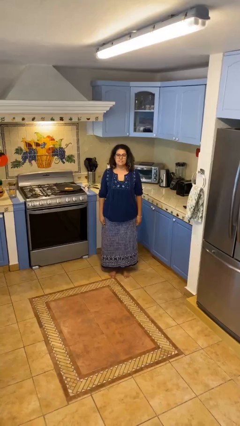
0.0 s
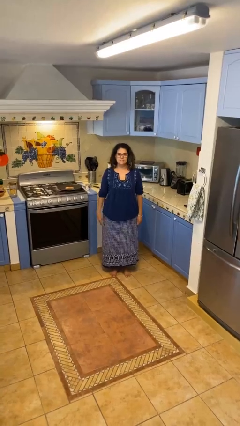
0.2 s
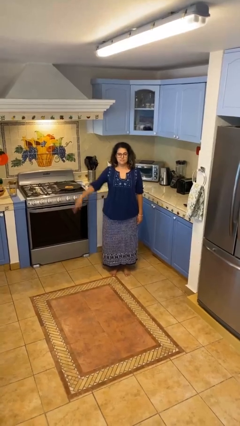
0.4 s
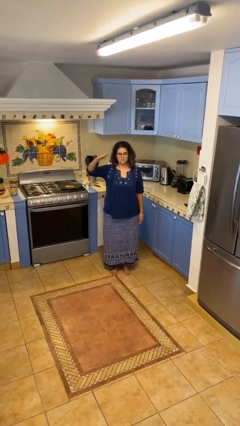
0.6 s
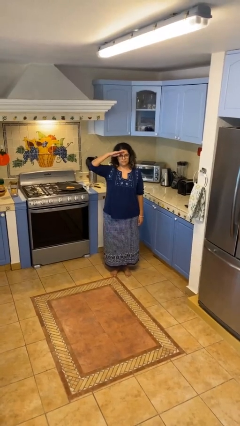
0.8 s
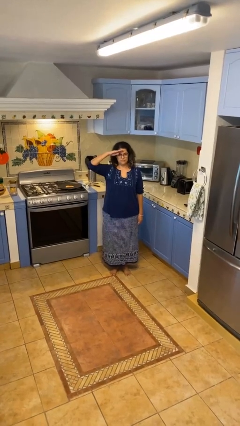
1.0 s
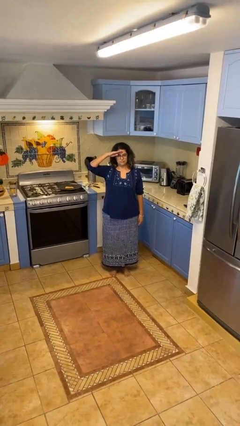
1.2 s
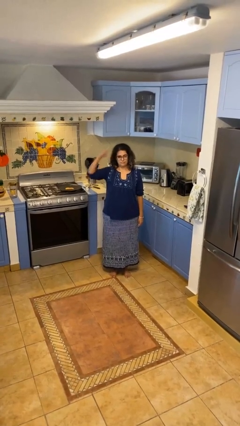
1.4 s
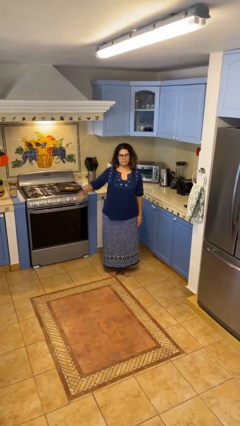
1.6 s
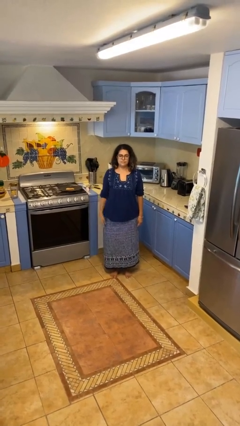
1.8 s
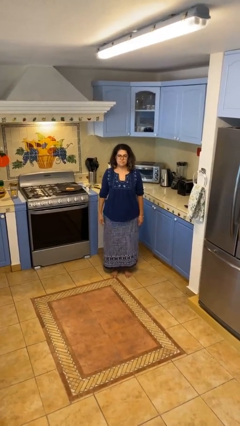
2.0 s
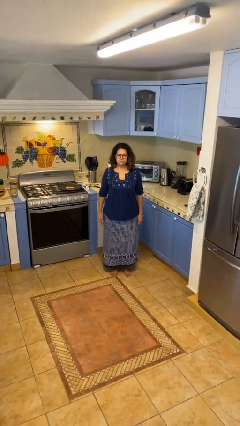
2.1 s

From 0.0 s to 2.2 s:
person salutes

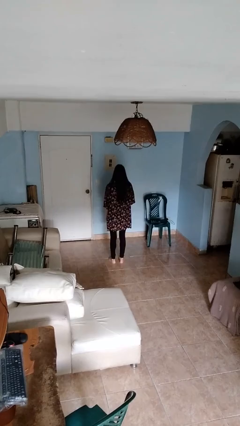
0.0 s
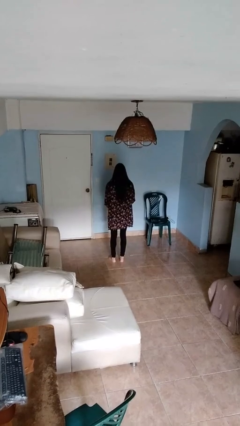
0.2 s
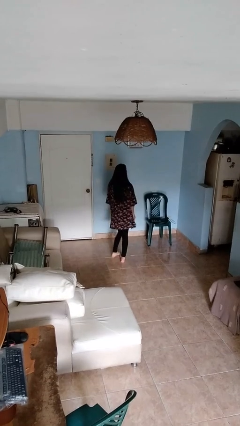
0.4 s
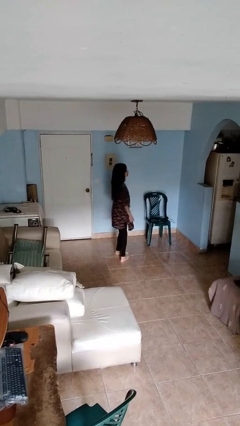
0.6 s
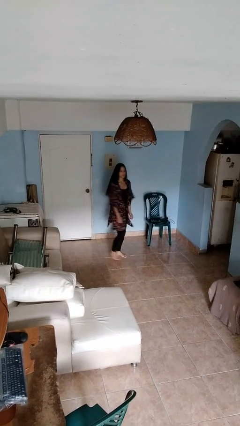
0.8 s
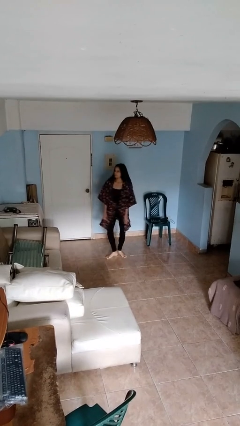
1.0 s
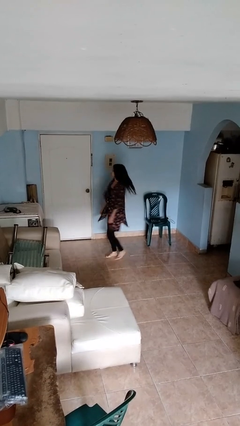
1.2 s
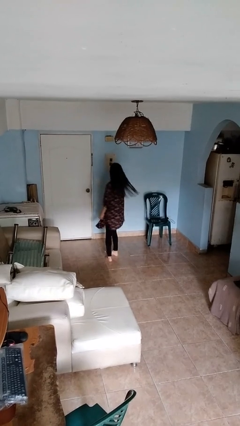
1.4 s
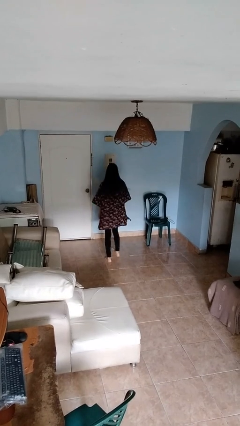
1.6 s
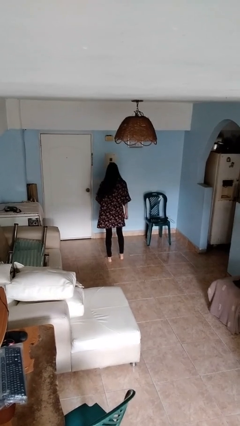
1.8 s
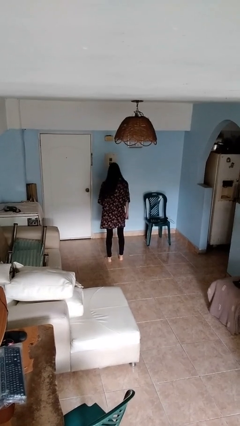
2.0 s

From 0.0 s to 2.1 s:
person twirls

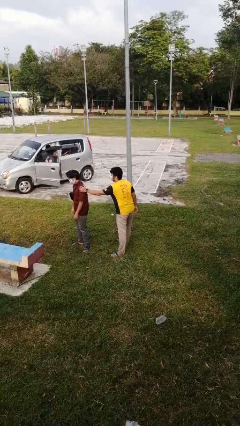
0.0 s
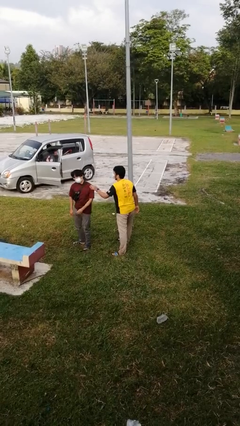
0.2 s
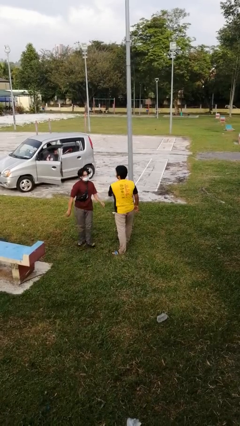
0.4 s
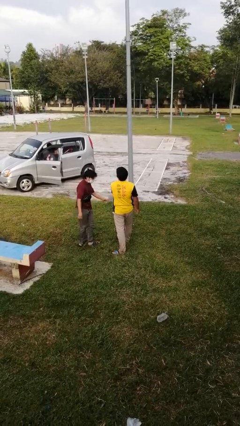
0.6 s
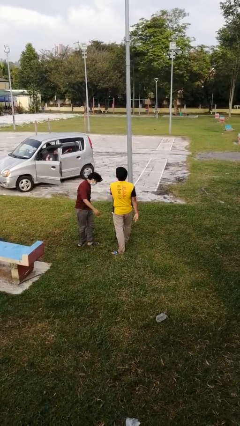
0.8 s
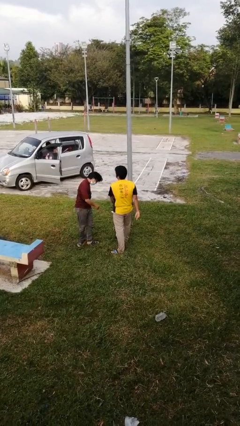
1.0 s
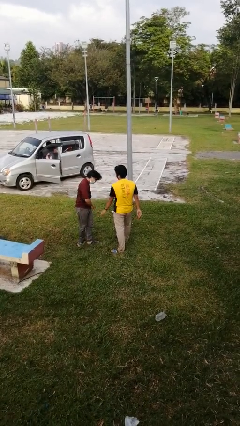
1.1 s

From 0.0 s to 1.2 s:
person spins person around

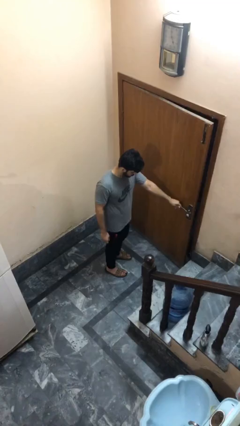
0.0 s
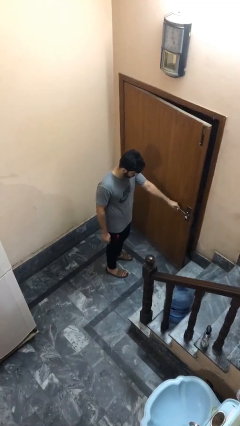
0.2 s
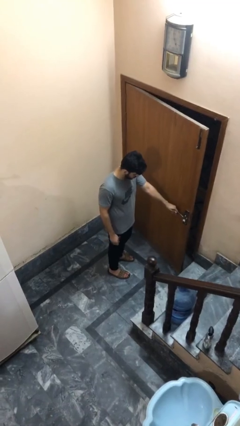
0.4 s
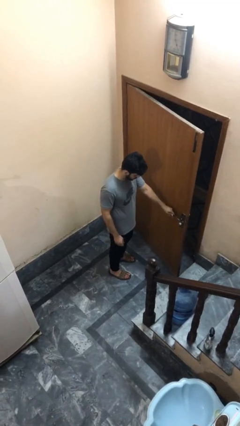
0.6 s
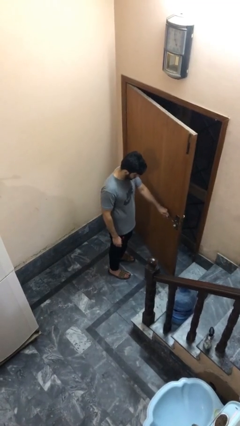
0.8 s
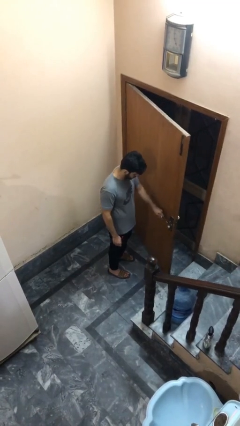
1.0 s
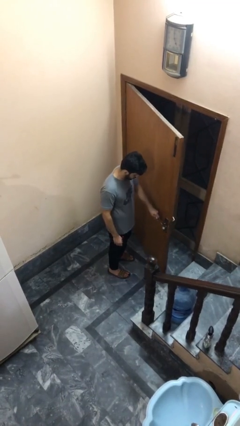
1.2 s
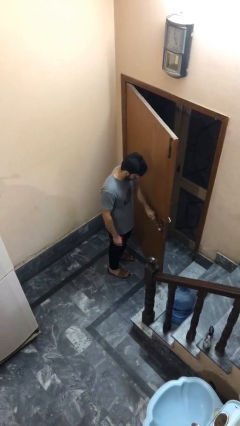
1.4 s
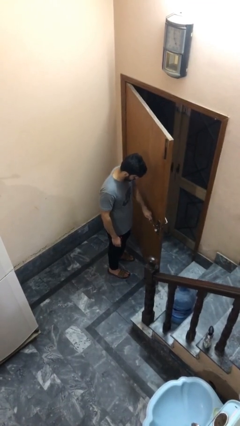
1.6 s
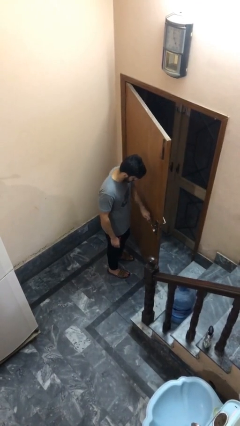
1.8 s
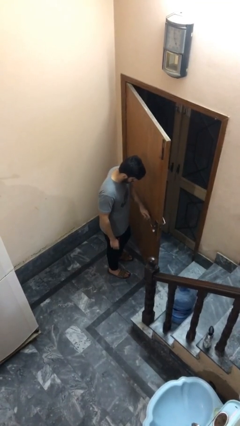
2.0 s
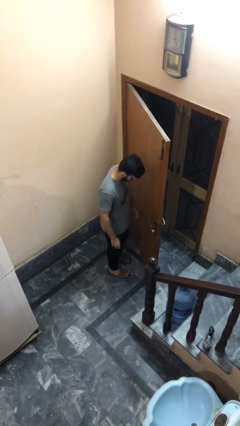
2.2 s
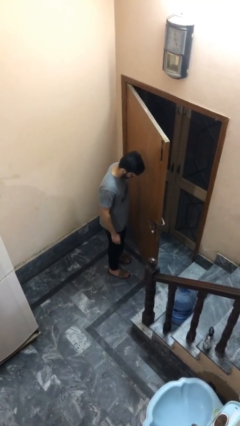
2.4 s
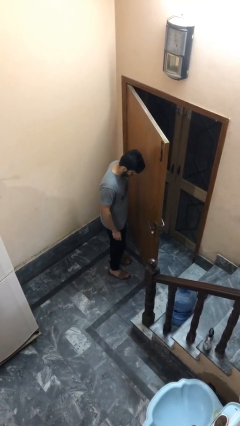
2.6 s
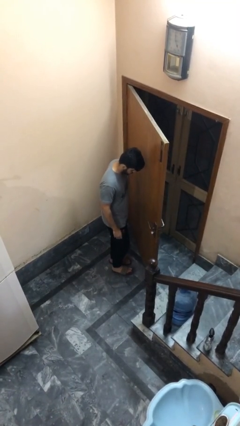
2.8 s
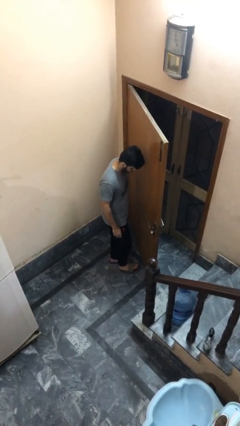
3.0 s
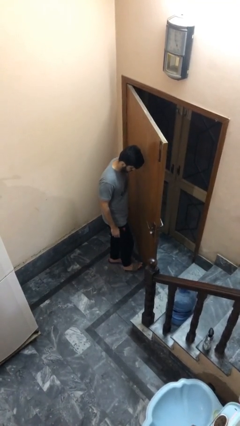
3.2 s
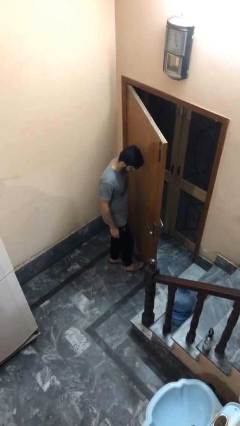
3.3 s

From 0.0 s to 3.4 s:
person opens facility door

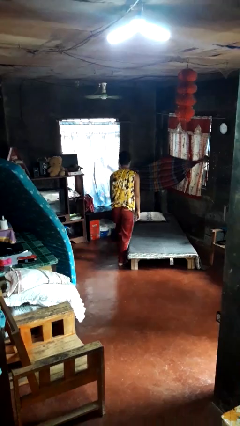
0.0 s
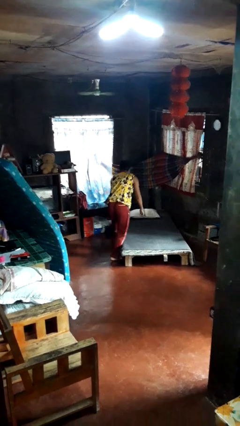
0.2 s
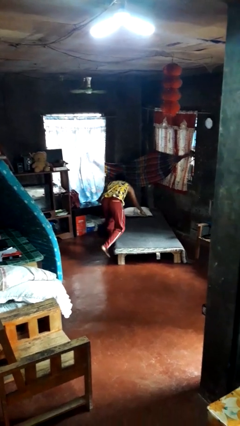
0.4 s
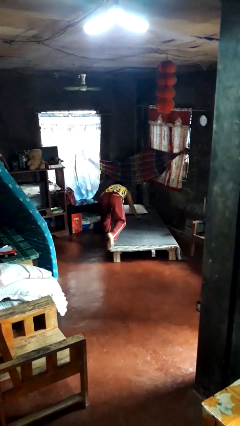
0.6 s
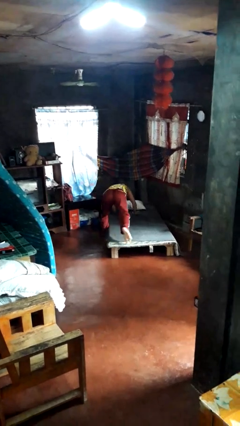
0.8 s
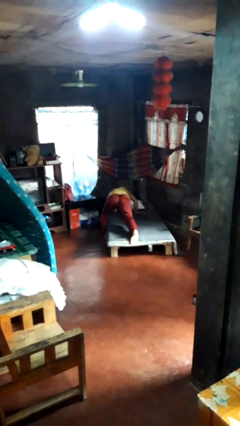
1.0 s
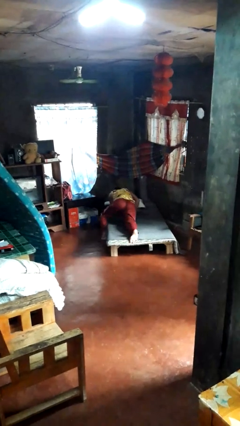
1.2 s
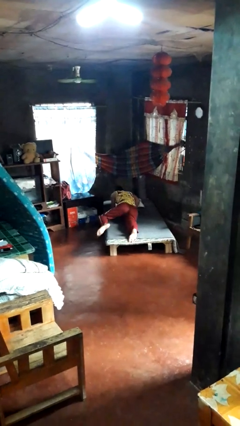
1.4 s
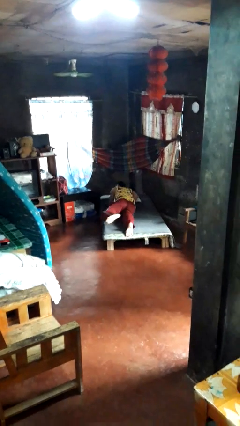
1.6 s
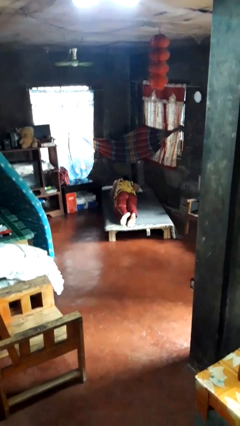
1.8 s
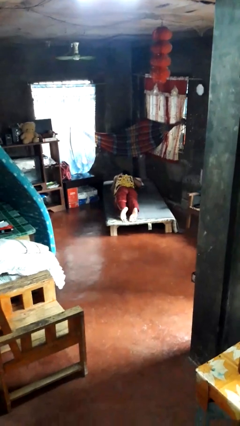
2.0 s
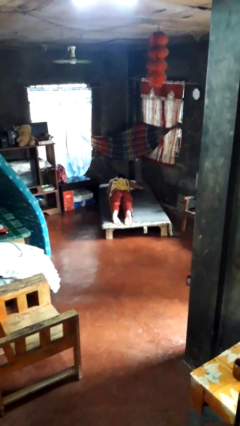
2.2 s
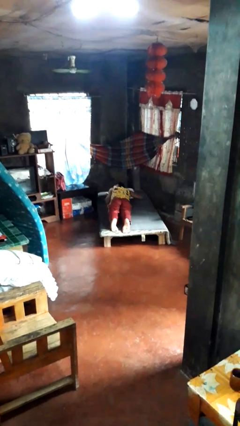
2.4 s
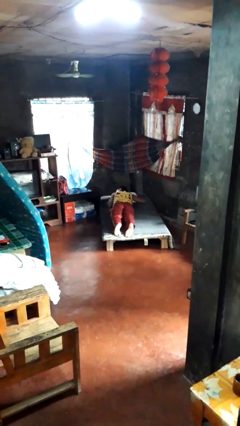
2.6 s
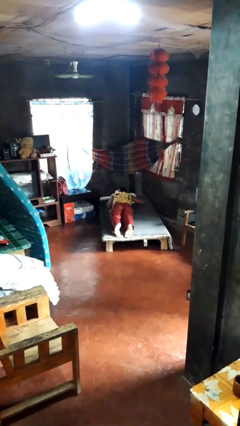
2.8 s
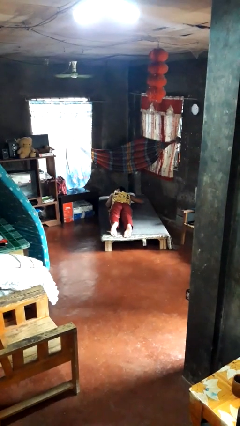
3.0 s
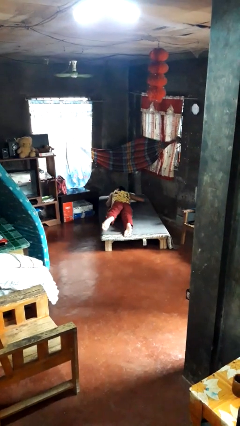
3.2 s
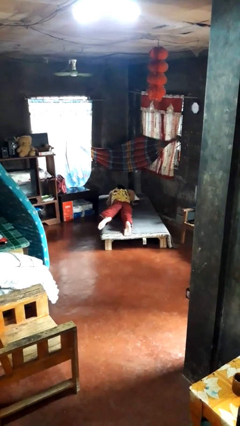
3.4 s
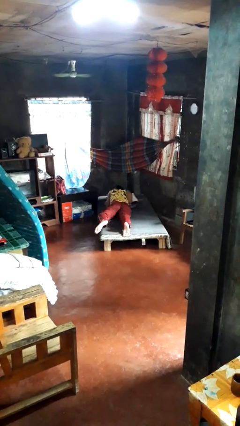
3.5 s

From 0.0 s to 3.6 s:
person lies down on bed

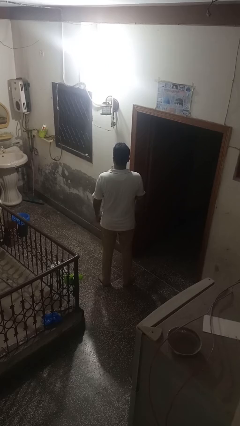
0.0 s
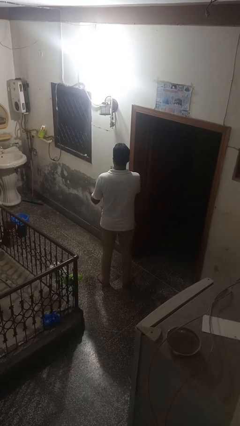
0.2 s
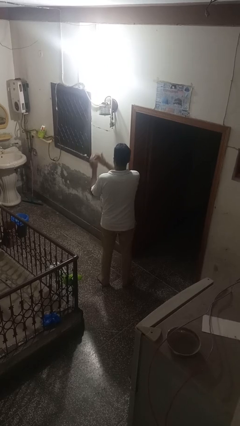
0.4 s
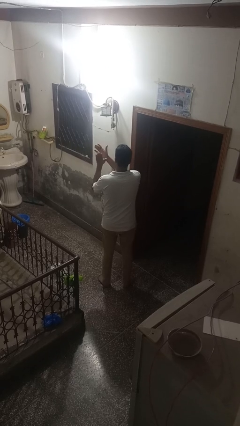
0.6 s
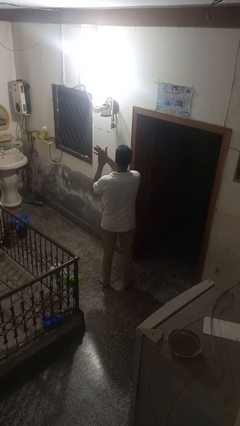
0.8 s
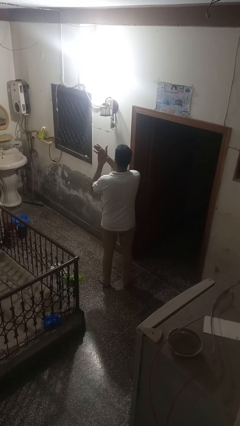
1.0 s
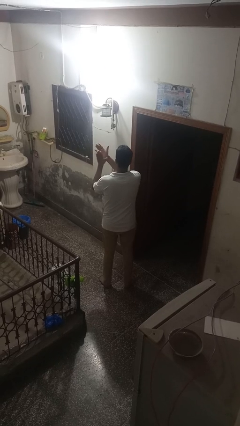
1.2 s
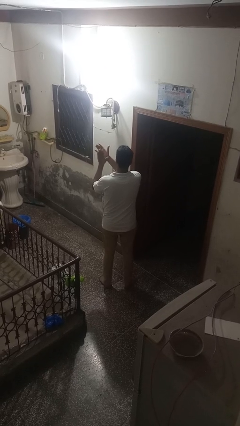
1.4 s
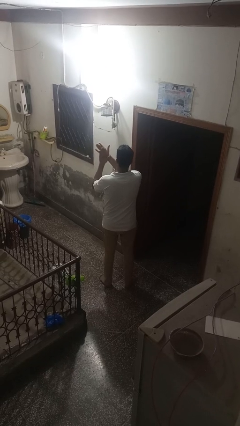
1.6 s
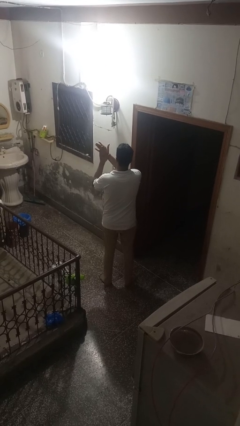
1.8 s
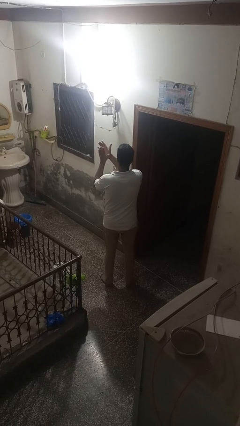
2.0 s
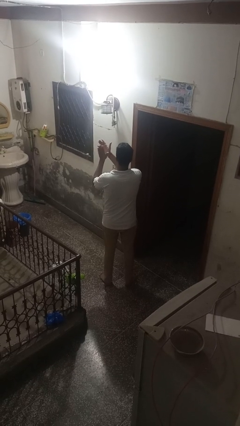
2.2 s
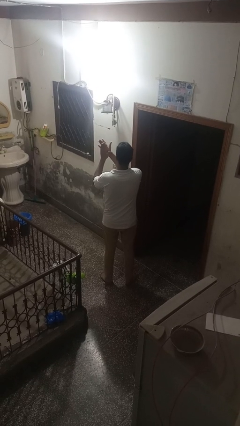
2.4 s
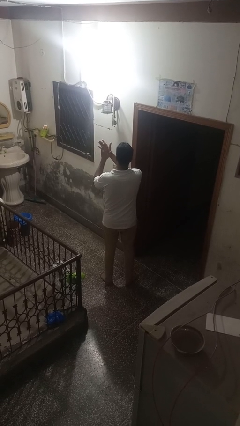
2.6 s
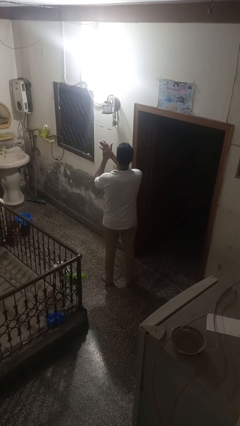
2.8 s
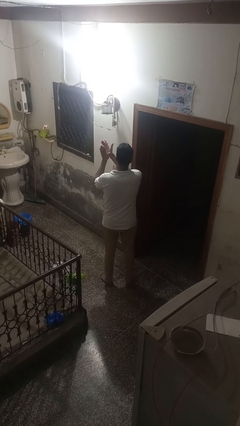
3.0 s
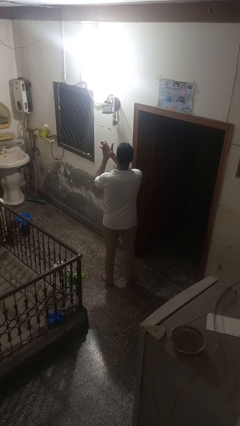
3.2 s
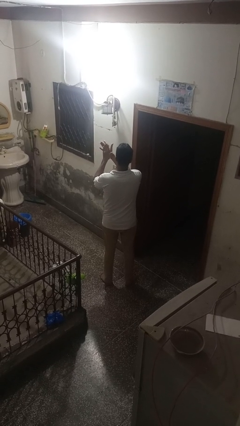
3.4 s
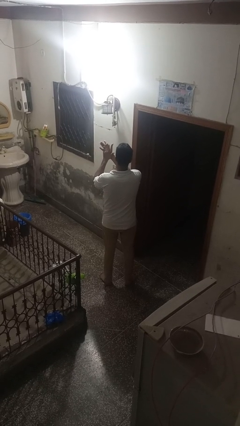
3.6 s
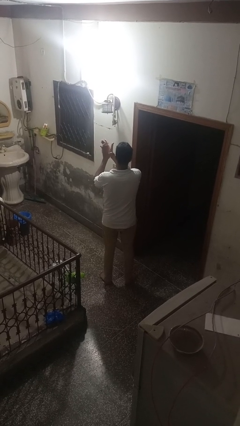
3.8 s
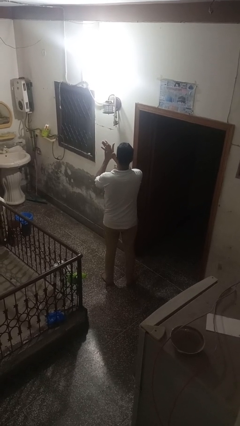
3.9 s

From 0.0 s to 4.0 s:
person claps hands

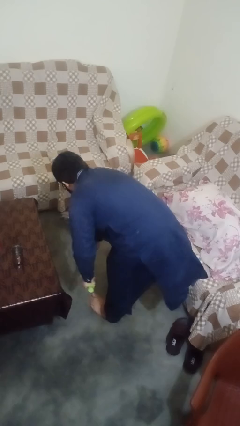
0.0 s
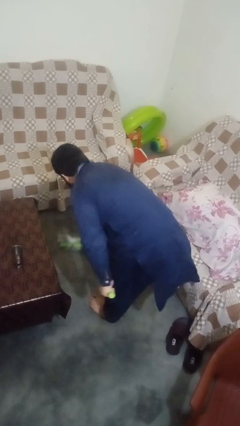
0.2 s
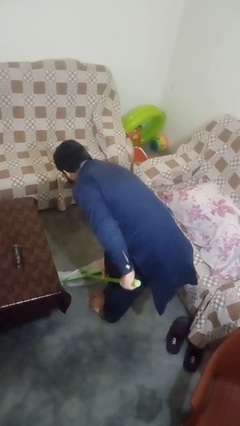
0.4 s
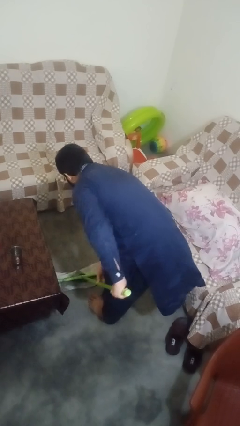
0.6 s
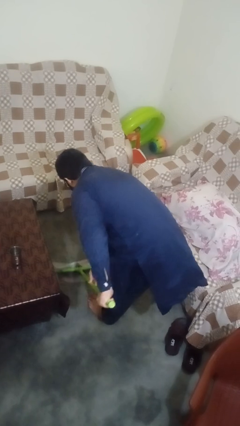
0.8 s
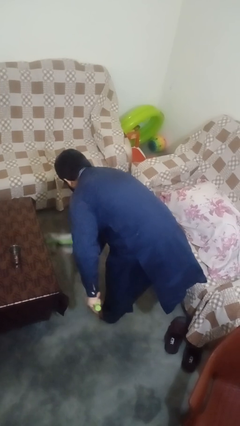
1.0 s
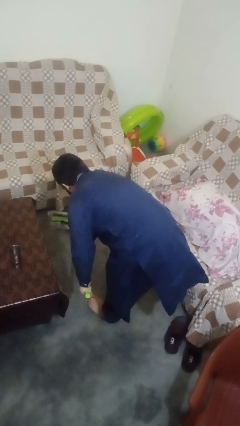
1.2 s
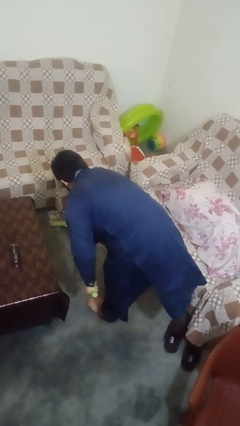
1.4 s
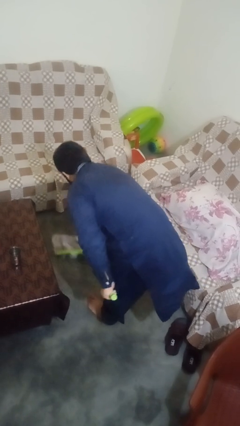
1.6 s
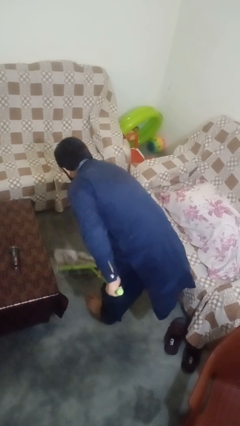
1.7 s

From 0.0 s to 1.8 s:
person mops
